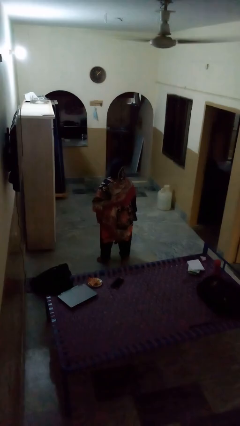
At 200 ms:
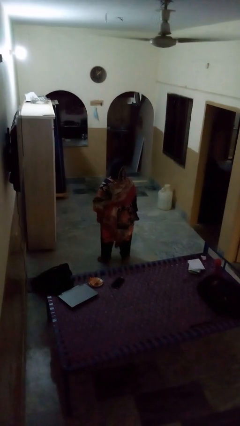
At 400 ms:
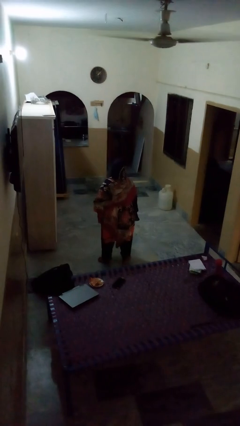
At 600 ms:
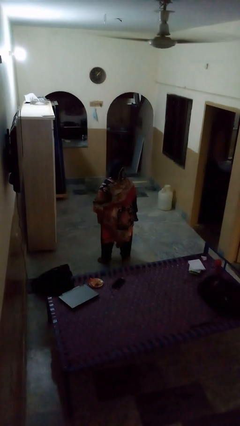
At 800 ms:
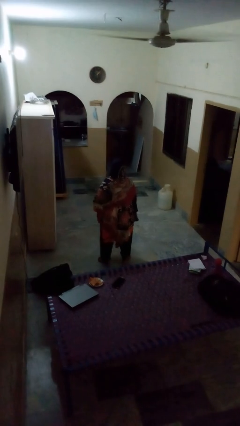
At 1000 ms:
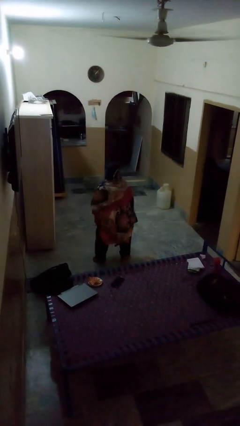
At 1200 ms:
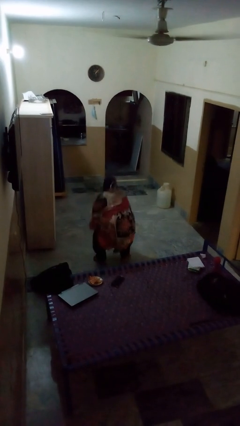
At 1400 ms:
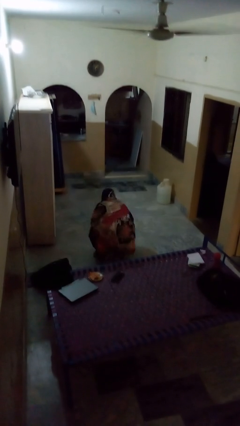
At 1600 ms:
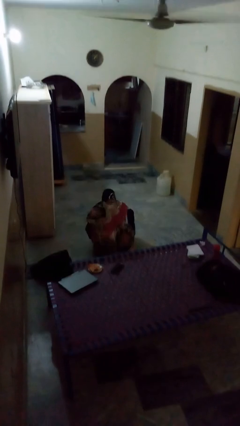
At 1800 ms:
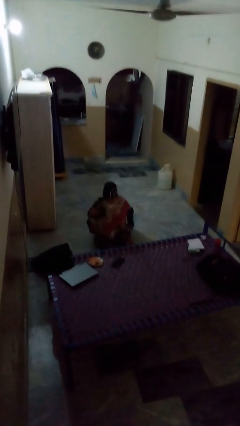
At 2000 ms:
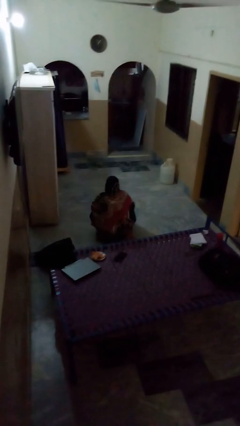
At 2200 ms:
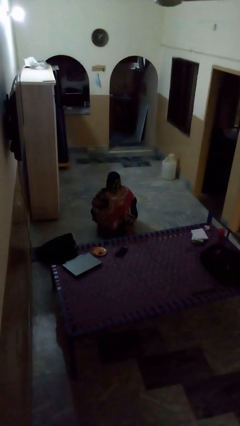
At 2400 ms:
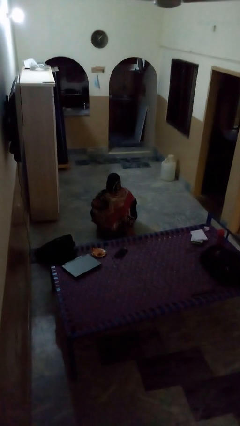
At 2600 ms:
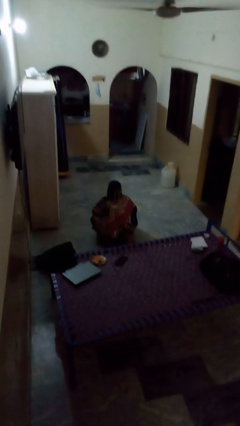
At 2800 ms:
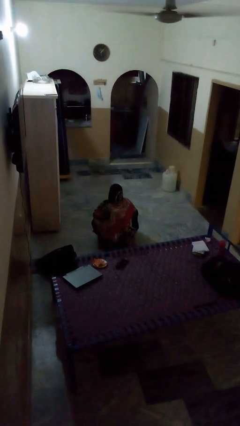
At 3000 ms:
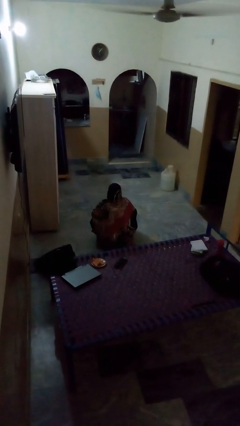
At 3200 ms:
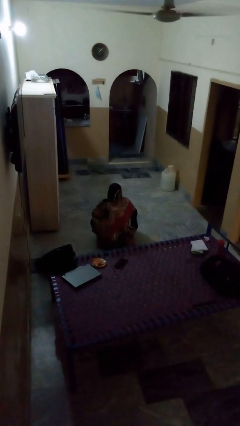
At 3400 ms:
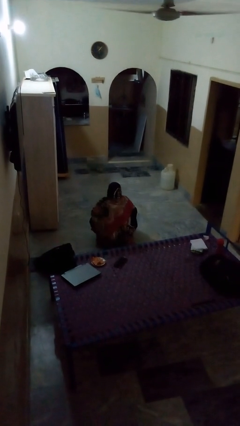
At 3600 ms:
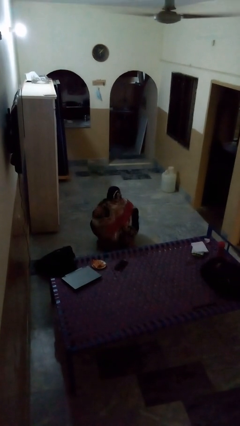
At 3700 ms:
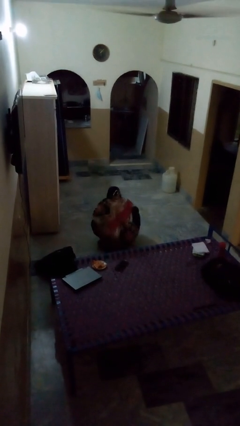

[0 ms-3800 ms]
person squats

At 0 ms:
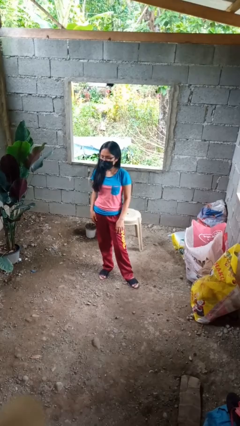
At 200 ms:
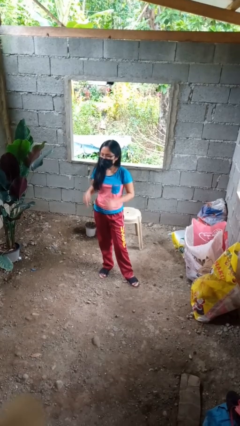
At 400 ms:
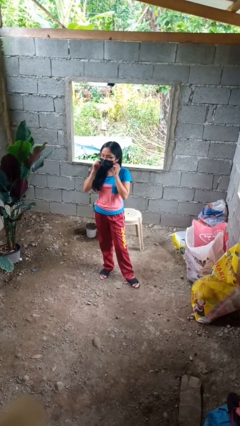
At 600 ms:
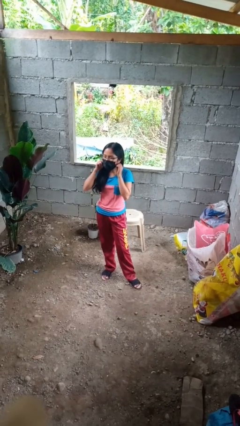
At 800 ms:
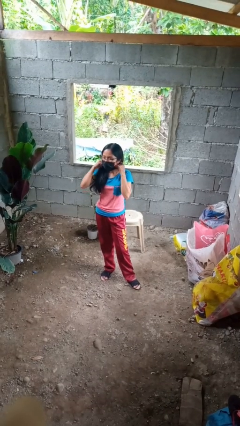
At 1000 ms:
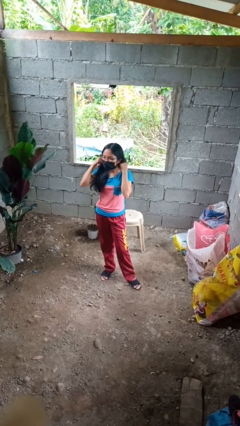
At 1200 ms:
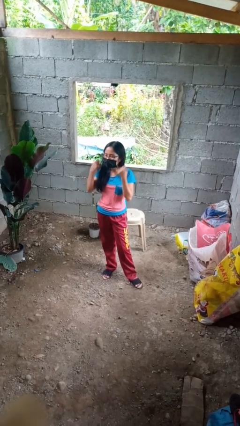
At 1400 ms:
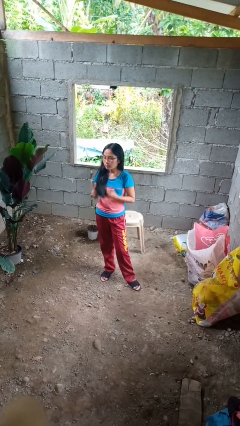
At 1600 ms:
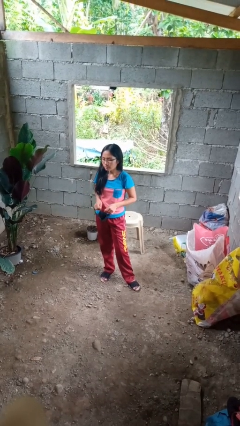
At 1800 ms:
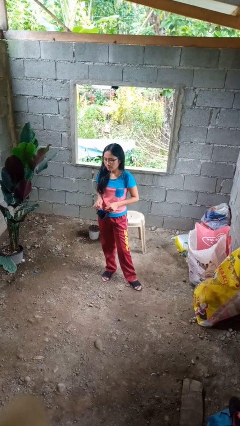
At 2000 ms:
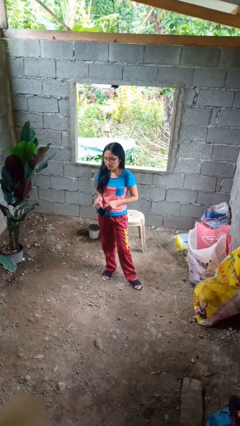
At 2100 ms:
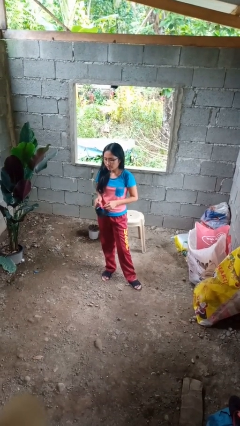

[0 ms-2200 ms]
person takes off facemask

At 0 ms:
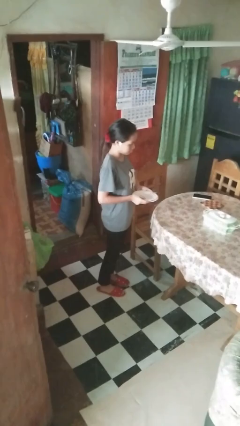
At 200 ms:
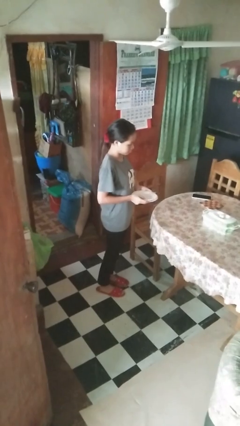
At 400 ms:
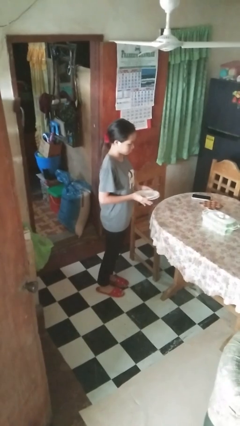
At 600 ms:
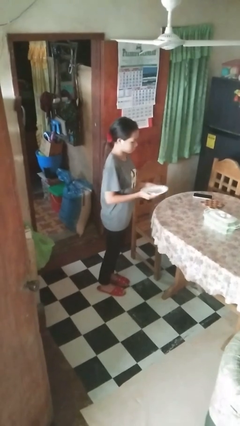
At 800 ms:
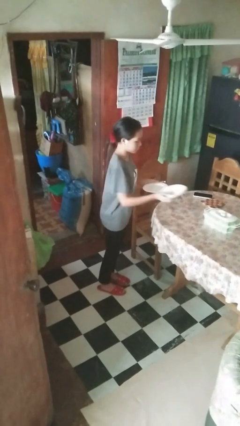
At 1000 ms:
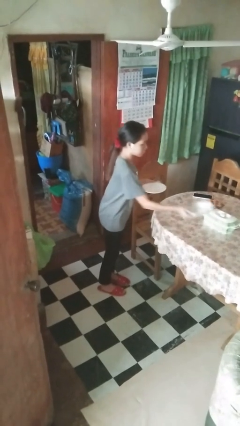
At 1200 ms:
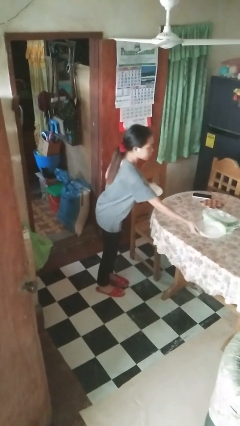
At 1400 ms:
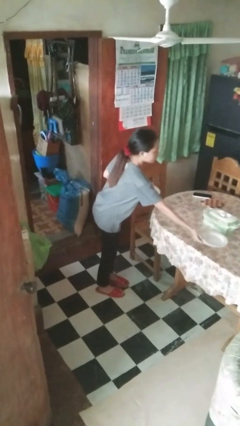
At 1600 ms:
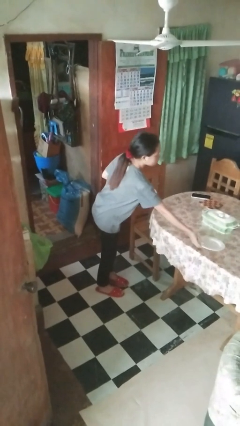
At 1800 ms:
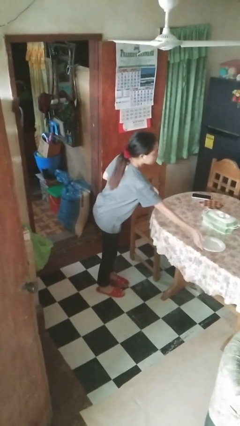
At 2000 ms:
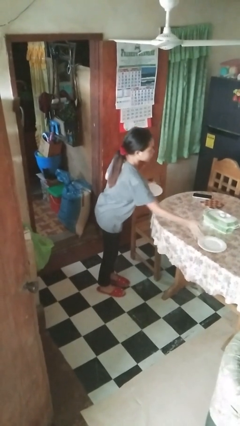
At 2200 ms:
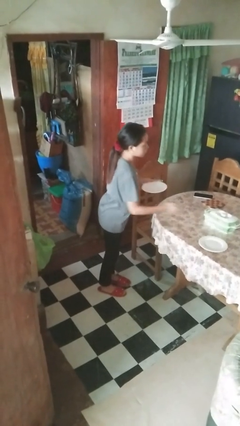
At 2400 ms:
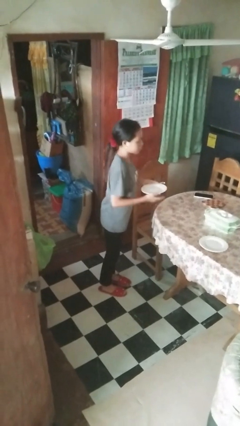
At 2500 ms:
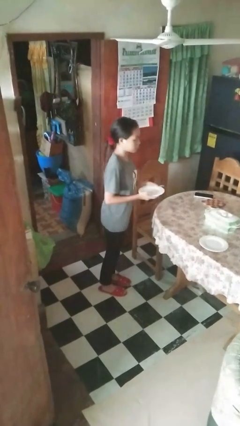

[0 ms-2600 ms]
person sets table

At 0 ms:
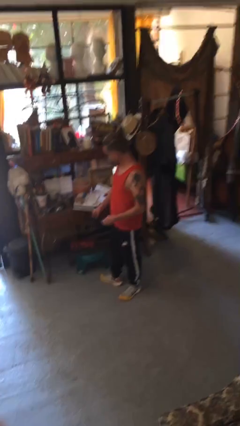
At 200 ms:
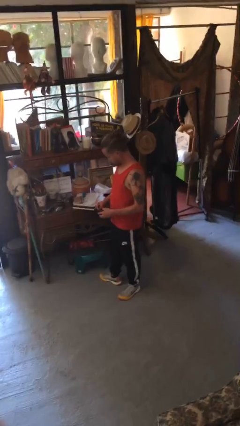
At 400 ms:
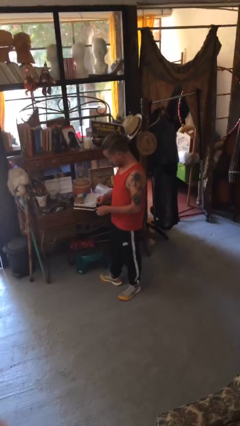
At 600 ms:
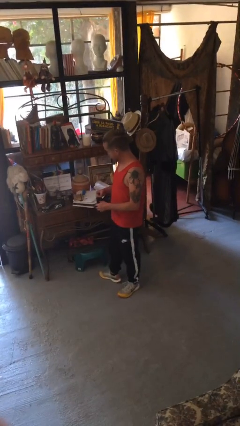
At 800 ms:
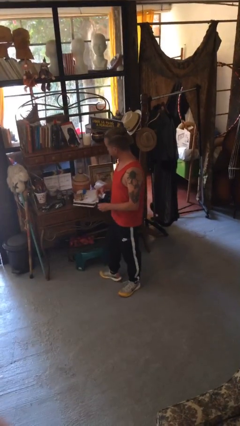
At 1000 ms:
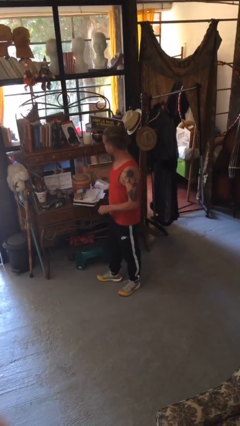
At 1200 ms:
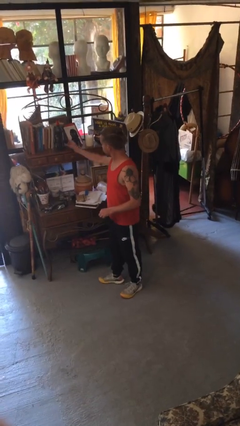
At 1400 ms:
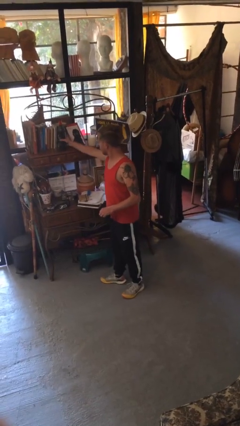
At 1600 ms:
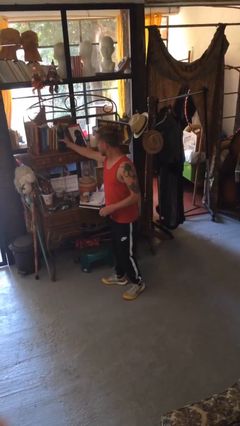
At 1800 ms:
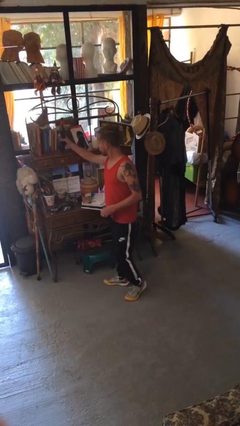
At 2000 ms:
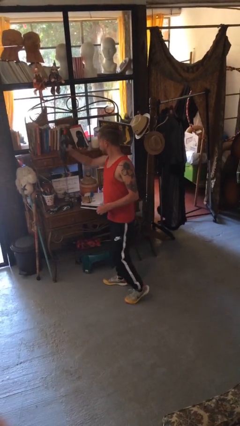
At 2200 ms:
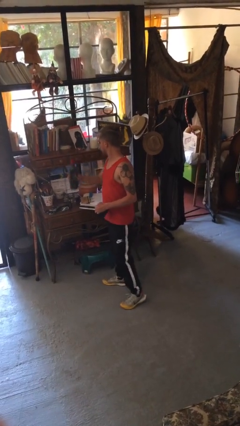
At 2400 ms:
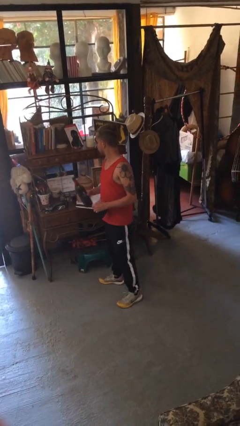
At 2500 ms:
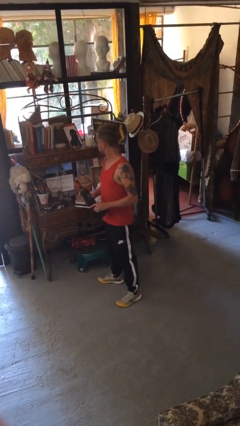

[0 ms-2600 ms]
person picks up object from shelf

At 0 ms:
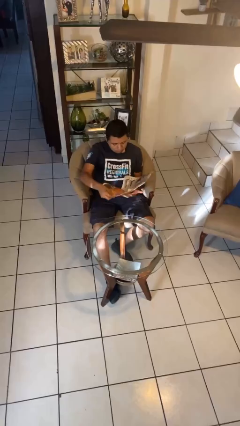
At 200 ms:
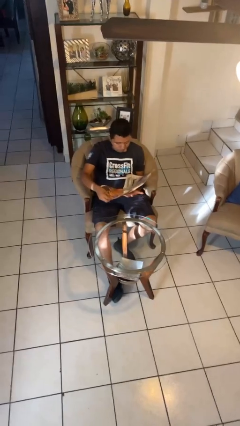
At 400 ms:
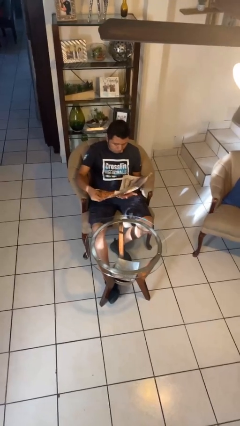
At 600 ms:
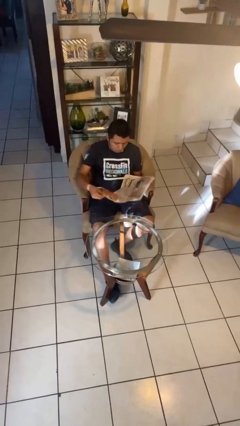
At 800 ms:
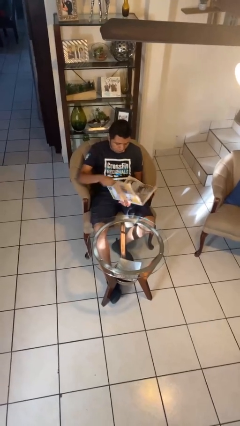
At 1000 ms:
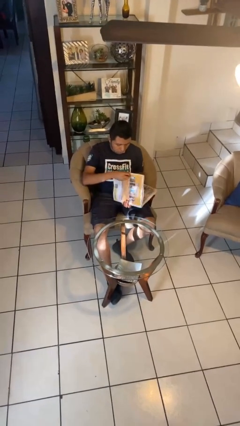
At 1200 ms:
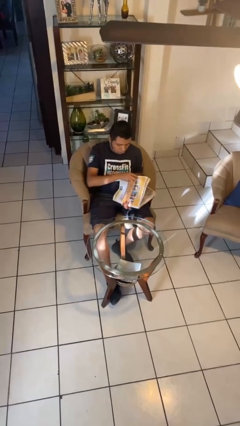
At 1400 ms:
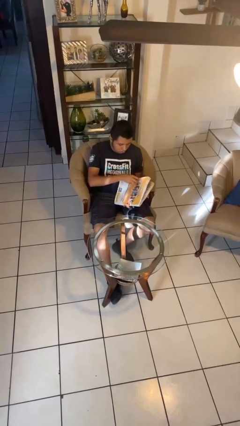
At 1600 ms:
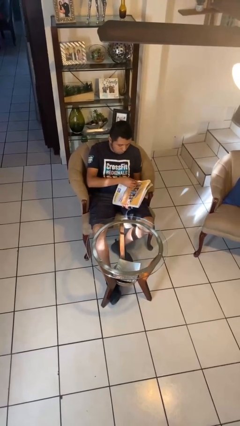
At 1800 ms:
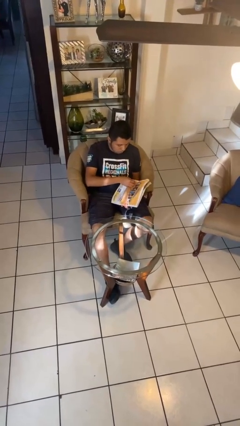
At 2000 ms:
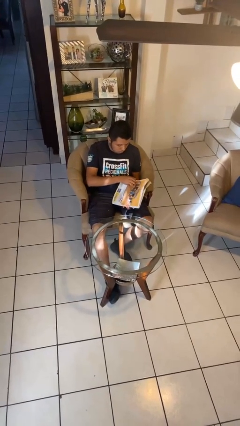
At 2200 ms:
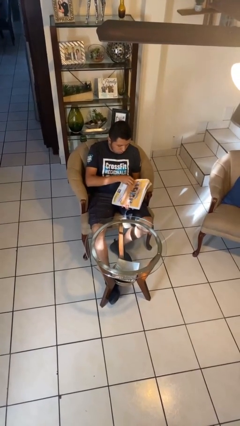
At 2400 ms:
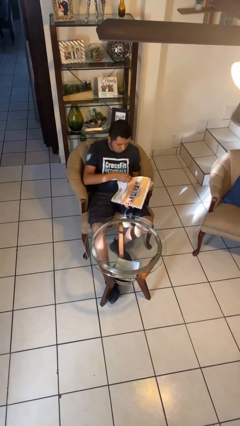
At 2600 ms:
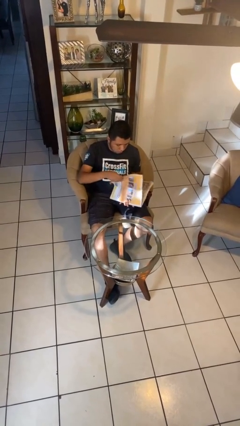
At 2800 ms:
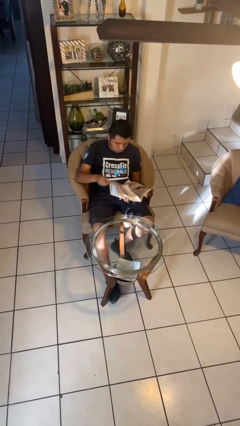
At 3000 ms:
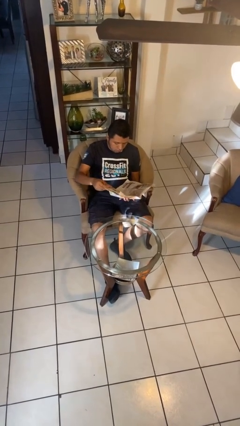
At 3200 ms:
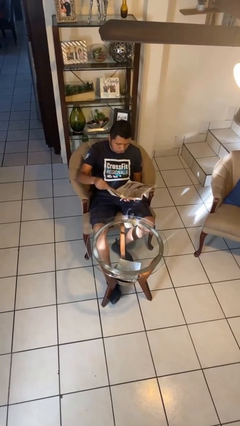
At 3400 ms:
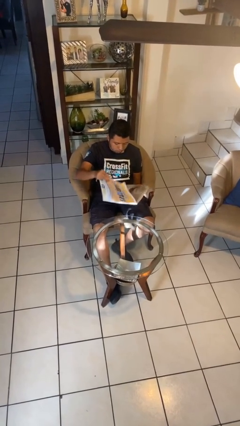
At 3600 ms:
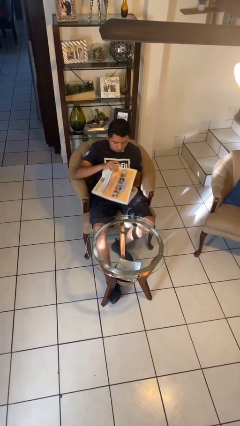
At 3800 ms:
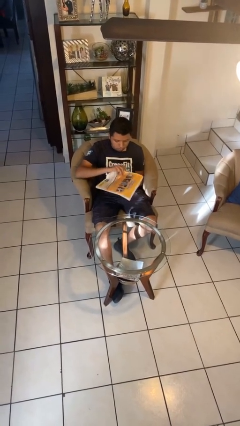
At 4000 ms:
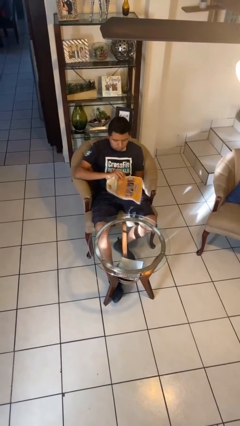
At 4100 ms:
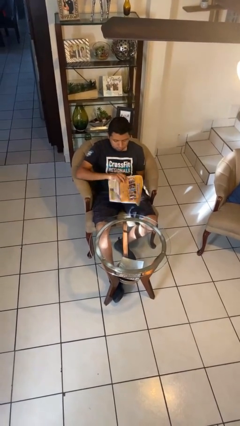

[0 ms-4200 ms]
person reads newspaper

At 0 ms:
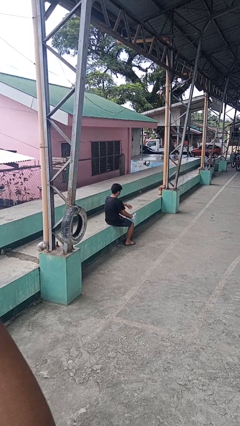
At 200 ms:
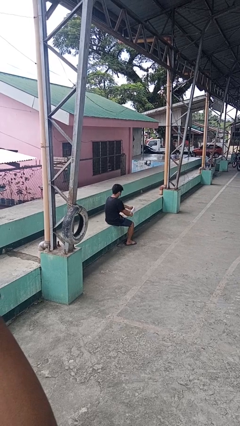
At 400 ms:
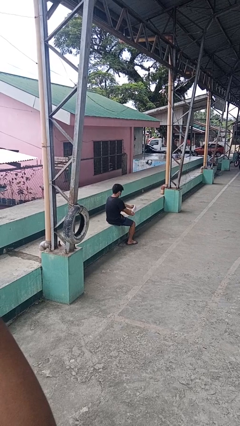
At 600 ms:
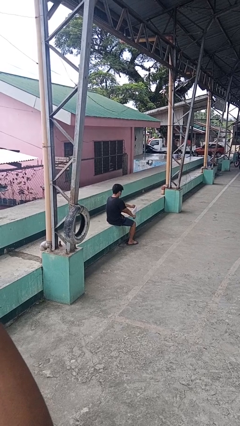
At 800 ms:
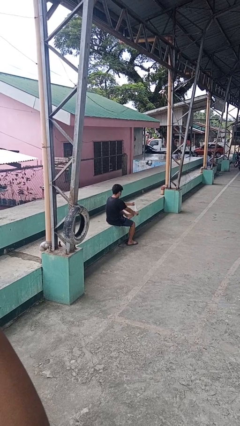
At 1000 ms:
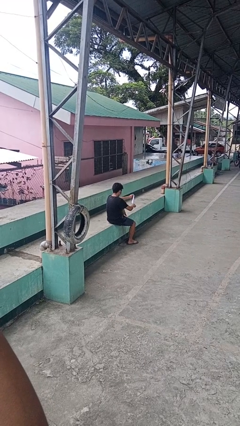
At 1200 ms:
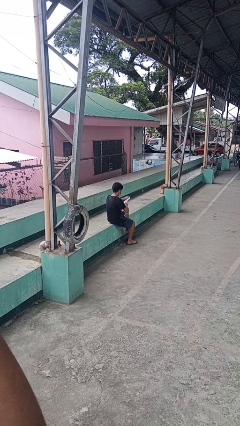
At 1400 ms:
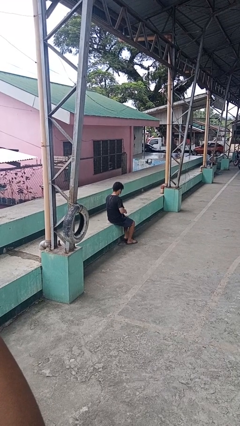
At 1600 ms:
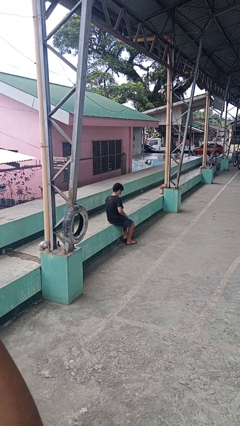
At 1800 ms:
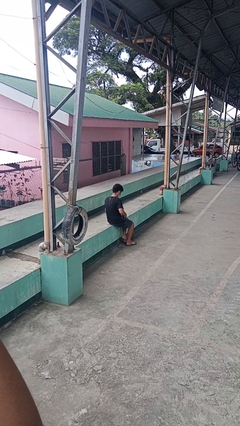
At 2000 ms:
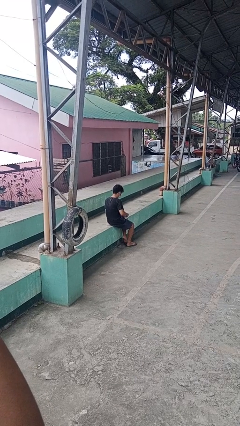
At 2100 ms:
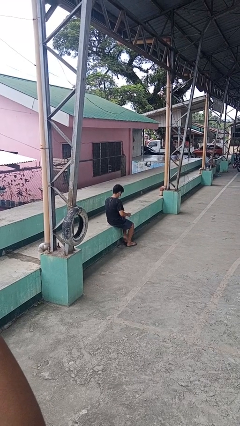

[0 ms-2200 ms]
person takes off socks
